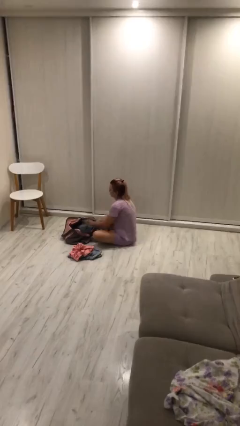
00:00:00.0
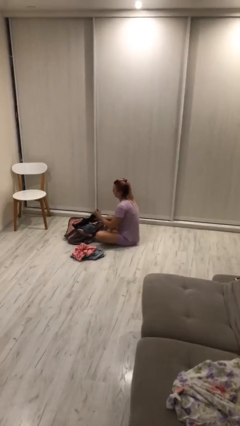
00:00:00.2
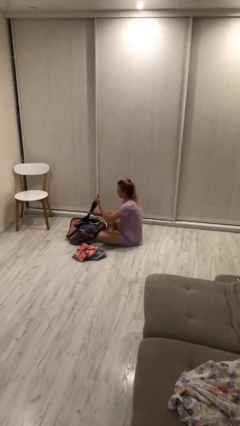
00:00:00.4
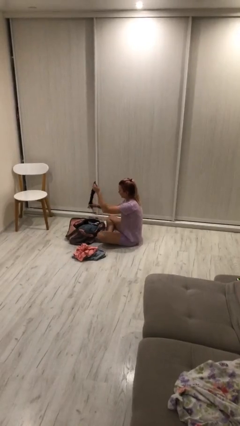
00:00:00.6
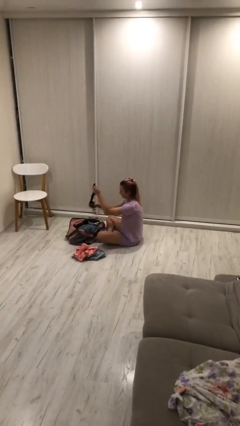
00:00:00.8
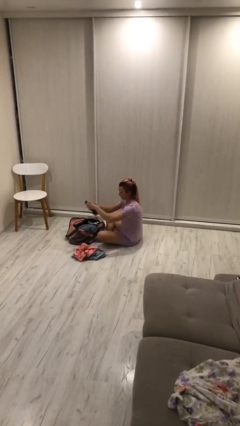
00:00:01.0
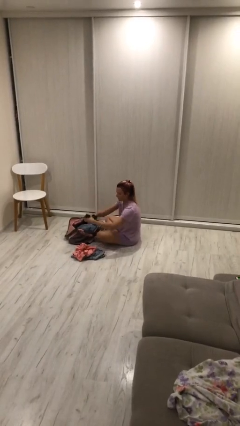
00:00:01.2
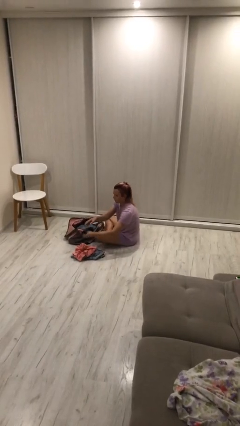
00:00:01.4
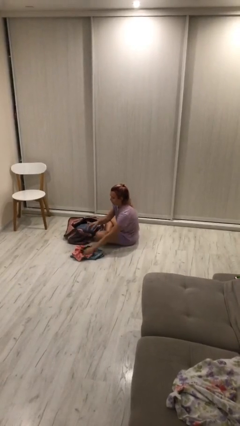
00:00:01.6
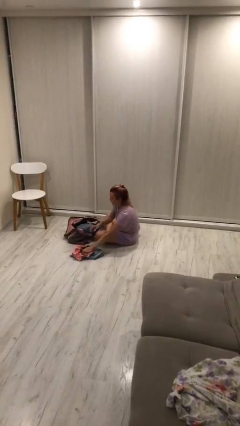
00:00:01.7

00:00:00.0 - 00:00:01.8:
person unloads clothes from suitcase

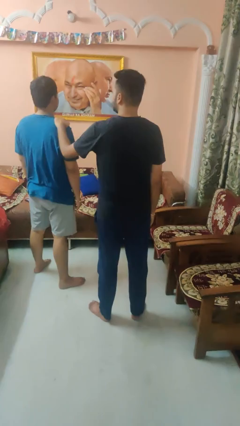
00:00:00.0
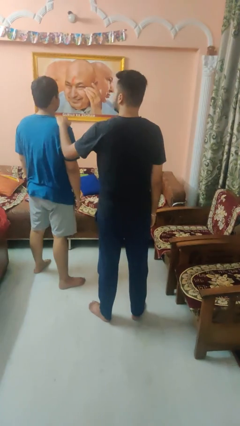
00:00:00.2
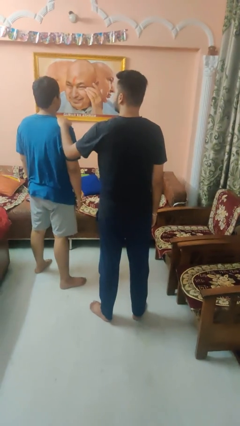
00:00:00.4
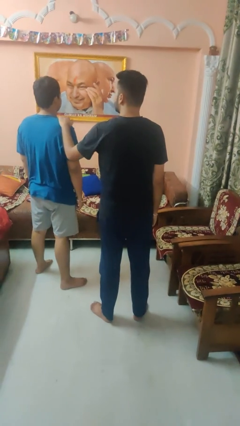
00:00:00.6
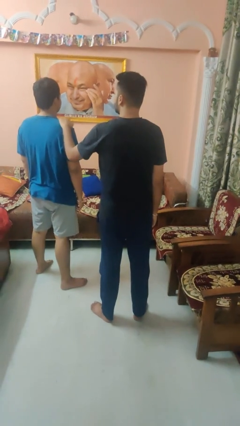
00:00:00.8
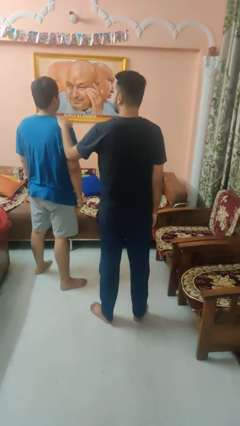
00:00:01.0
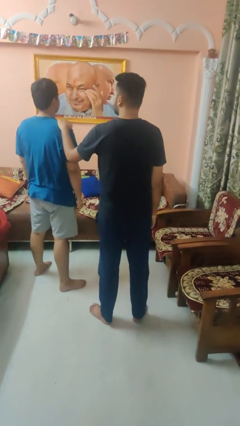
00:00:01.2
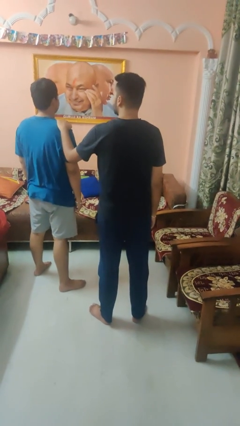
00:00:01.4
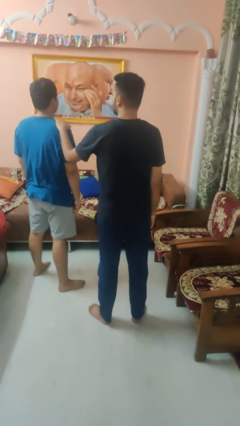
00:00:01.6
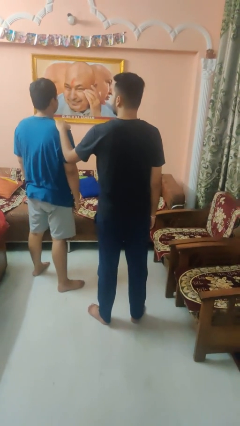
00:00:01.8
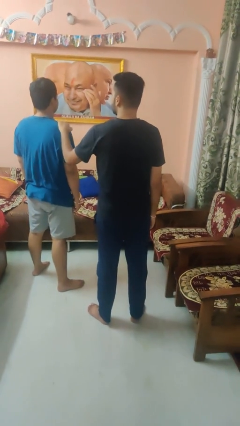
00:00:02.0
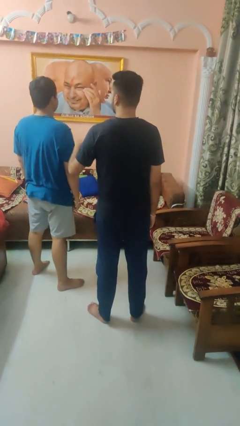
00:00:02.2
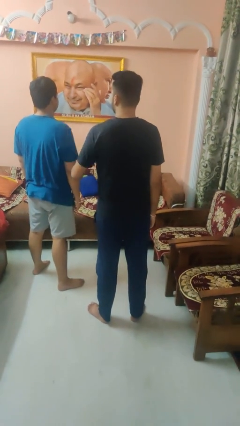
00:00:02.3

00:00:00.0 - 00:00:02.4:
person pounds shoulders of person

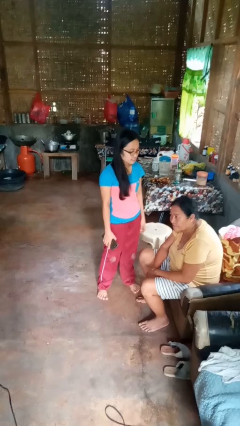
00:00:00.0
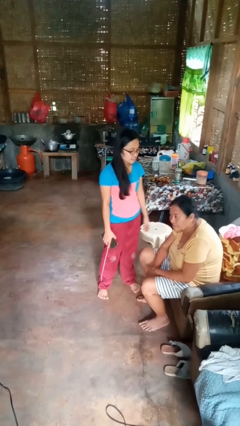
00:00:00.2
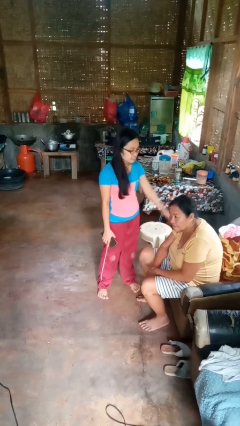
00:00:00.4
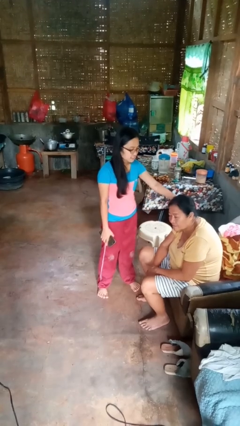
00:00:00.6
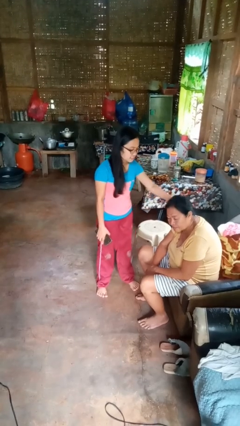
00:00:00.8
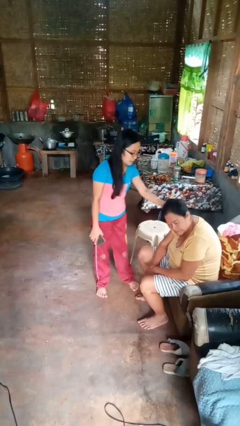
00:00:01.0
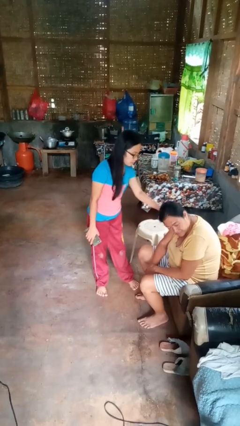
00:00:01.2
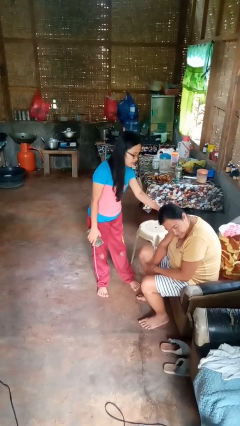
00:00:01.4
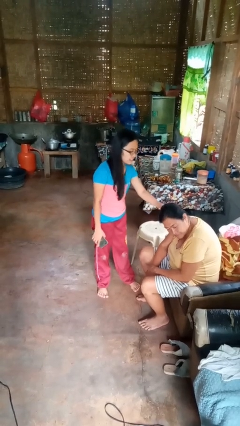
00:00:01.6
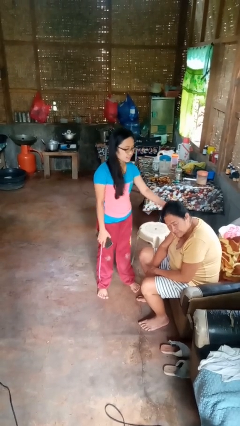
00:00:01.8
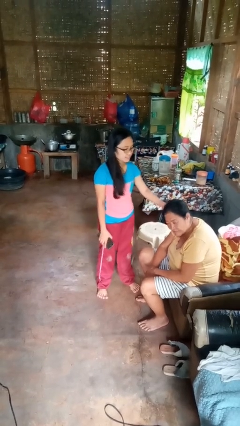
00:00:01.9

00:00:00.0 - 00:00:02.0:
person grabs person by hair

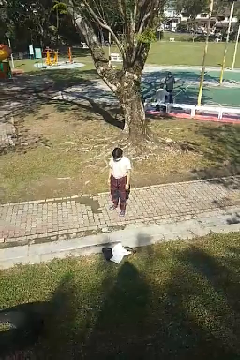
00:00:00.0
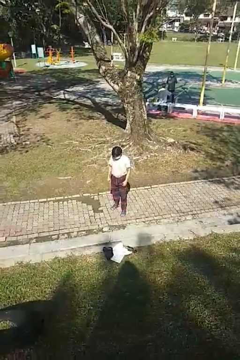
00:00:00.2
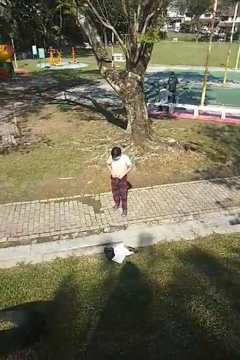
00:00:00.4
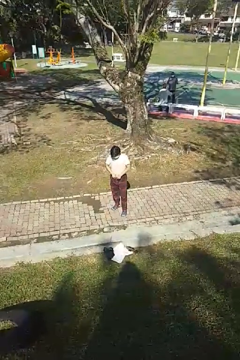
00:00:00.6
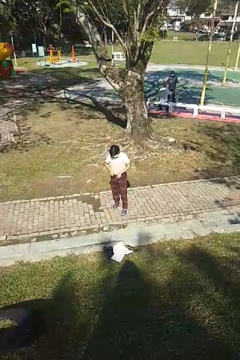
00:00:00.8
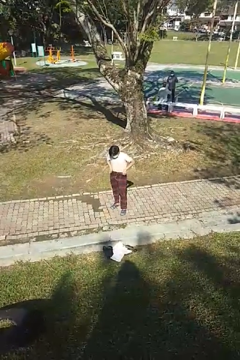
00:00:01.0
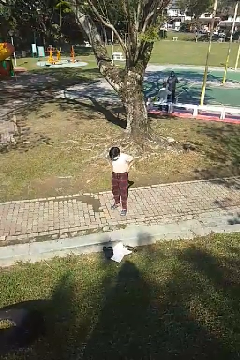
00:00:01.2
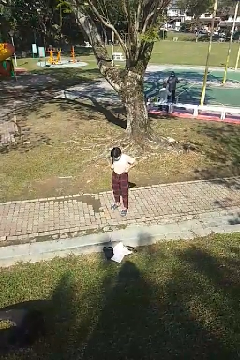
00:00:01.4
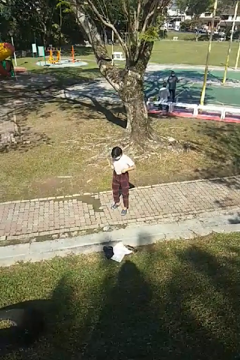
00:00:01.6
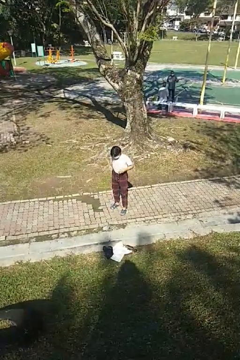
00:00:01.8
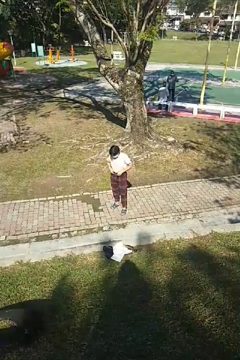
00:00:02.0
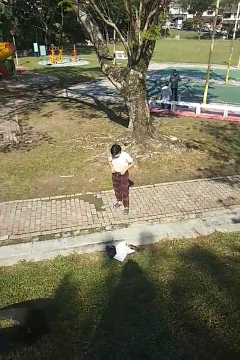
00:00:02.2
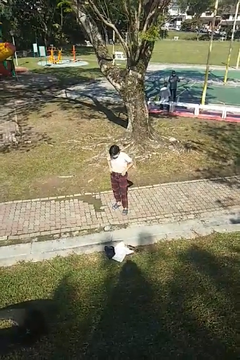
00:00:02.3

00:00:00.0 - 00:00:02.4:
person hikes up pants

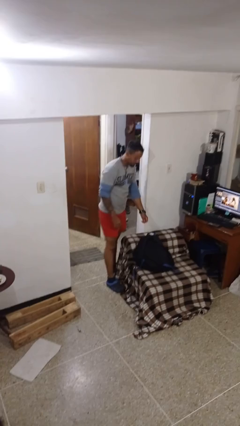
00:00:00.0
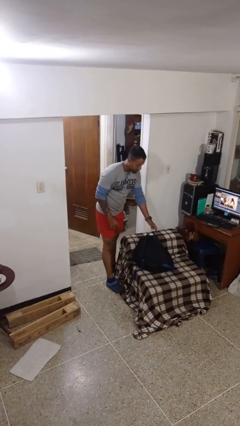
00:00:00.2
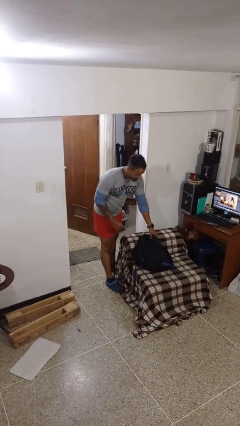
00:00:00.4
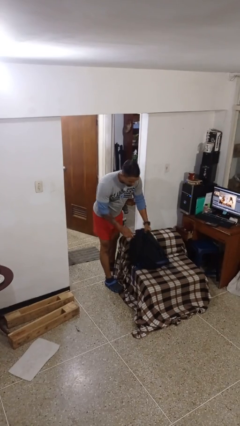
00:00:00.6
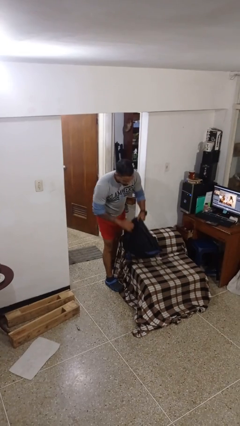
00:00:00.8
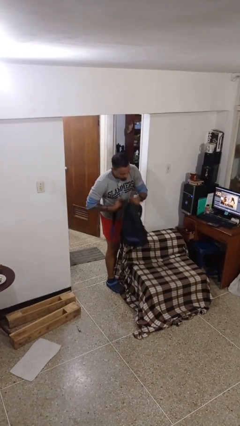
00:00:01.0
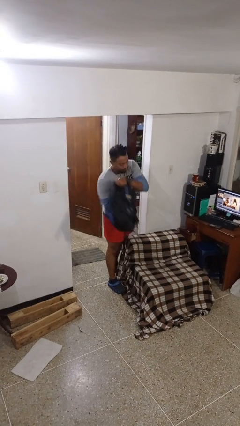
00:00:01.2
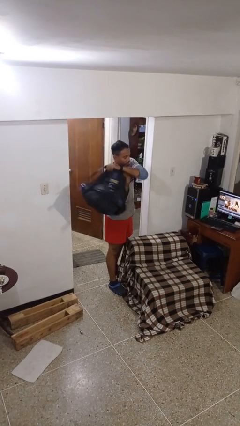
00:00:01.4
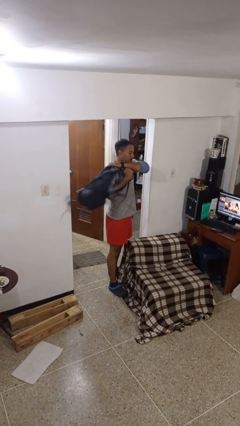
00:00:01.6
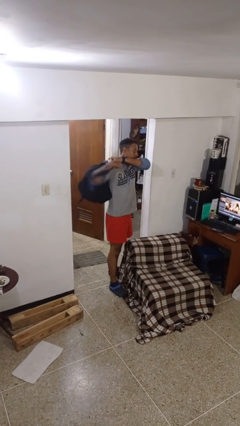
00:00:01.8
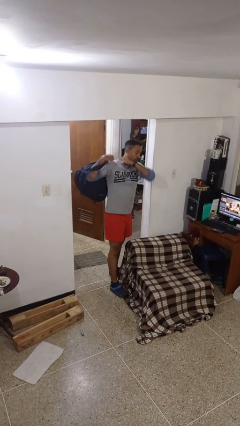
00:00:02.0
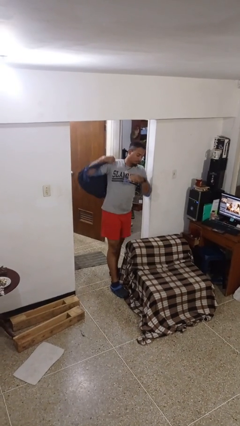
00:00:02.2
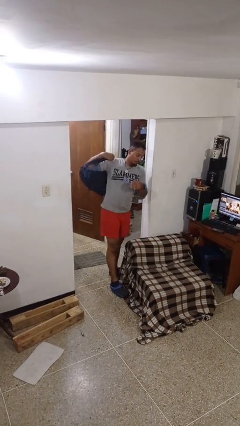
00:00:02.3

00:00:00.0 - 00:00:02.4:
person picks up object from couch

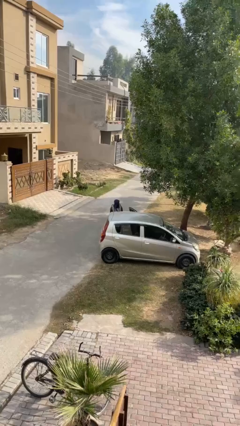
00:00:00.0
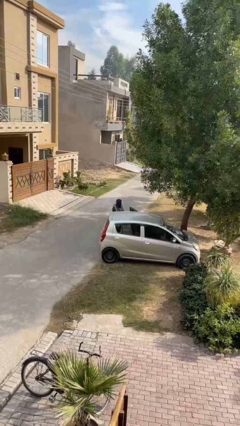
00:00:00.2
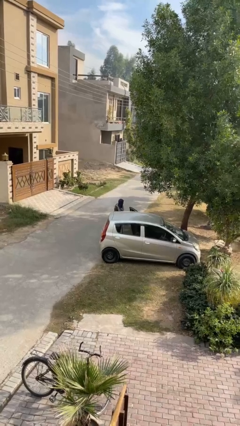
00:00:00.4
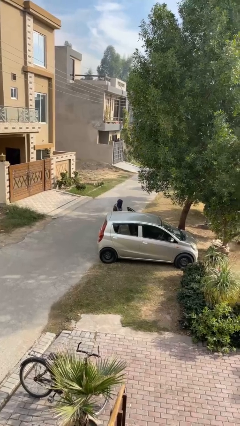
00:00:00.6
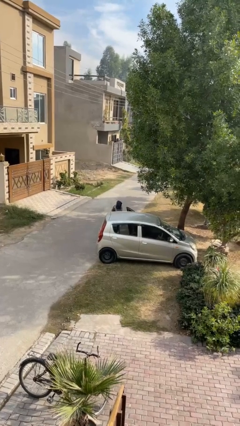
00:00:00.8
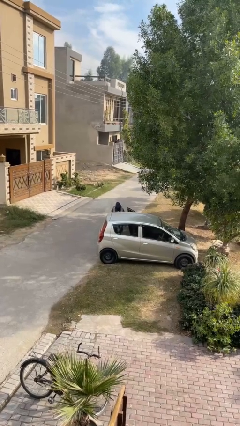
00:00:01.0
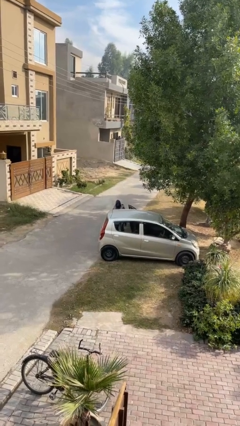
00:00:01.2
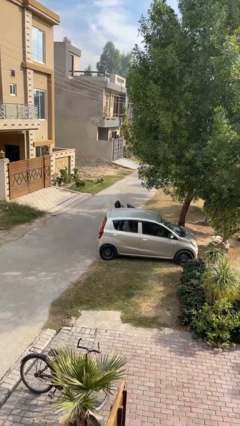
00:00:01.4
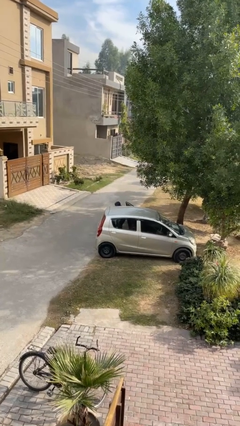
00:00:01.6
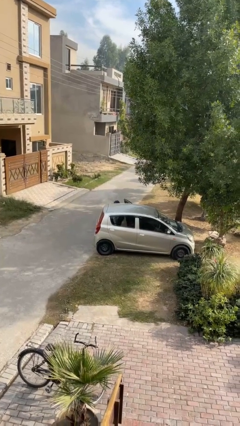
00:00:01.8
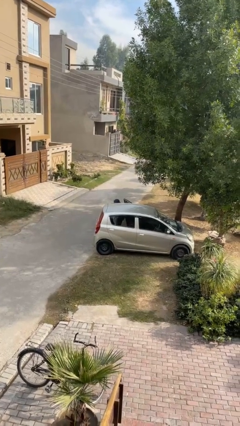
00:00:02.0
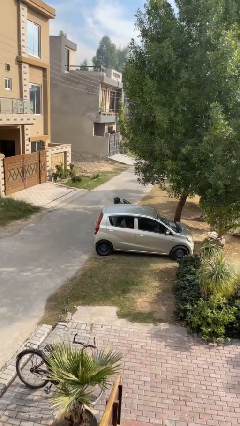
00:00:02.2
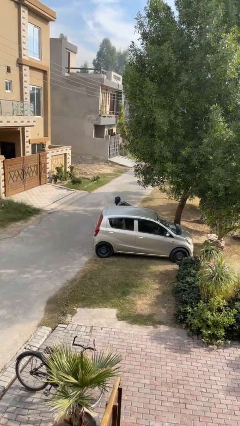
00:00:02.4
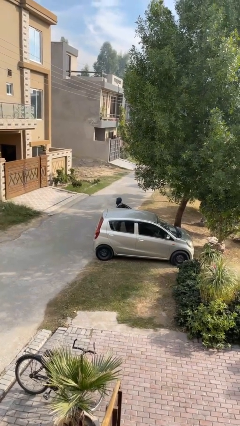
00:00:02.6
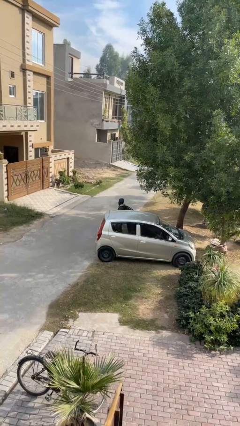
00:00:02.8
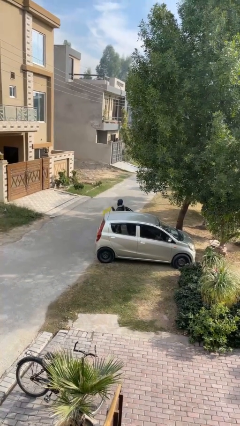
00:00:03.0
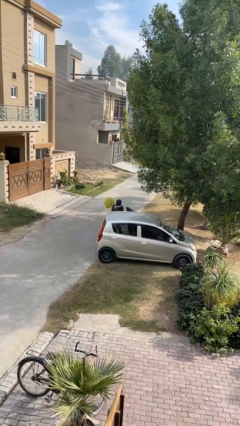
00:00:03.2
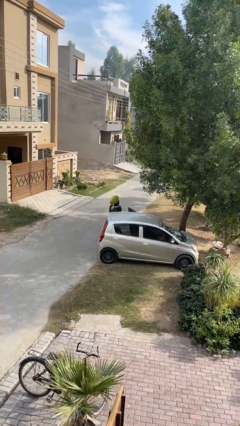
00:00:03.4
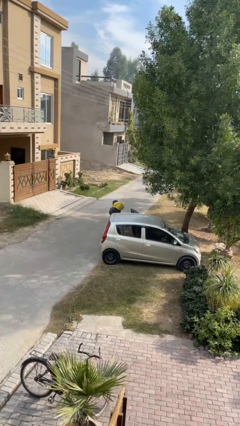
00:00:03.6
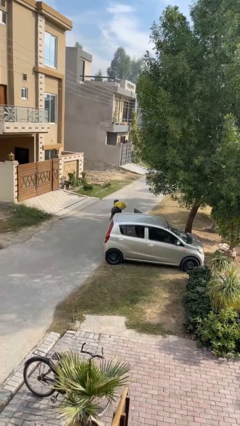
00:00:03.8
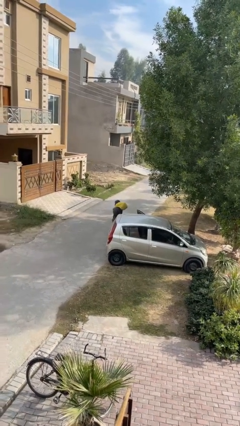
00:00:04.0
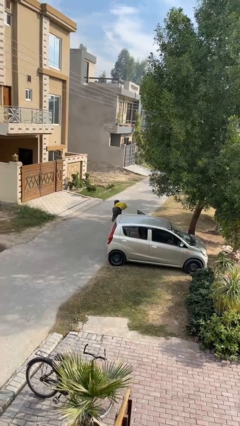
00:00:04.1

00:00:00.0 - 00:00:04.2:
person unloads car

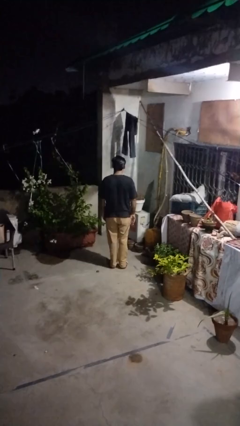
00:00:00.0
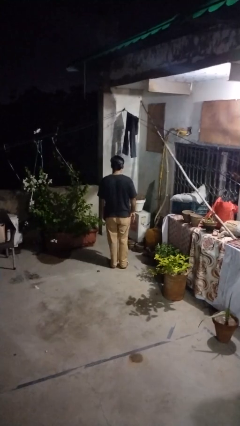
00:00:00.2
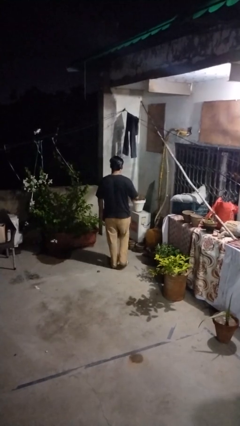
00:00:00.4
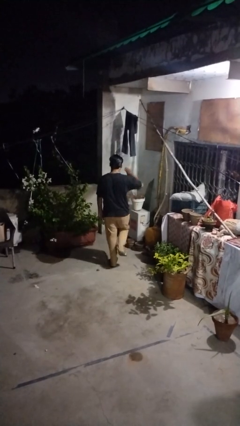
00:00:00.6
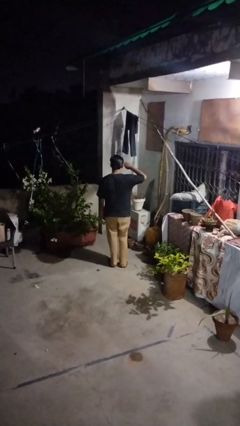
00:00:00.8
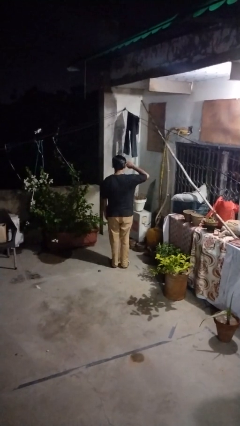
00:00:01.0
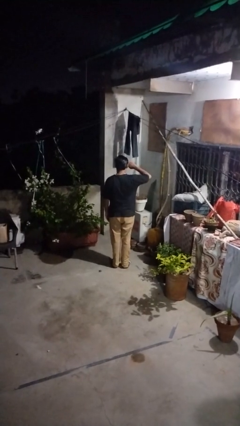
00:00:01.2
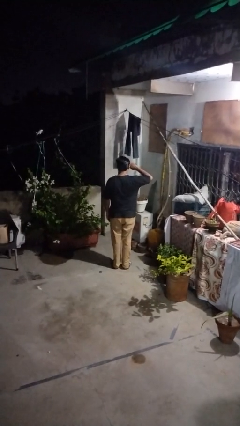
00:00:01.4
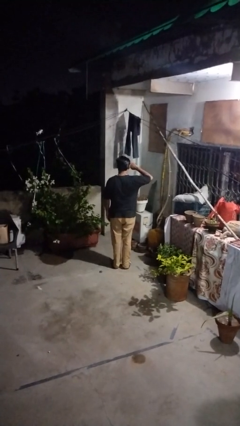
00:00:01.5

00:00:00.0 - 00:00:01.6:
person salutes

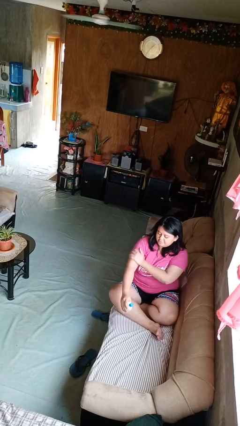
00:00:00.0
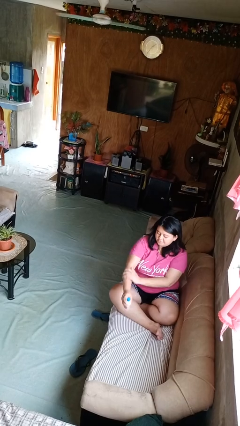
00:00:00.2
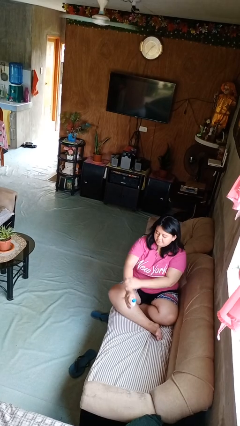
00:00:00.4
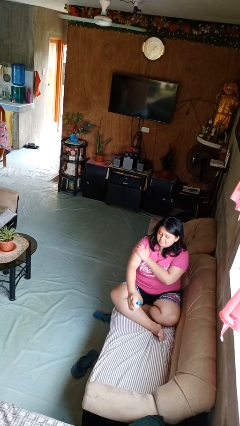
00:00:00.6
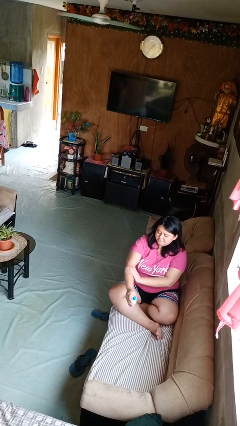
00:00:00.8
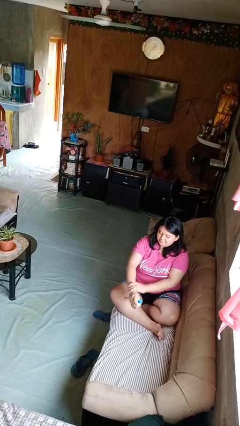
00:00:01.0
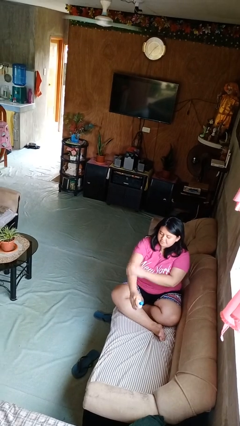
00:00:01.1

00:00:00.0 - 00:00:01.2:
person applies sunscreen
